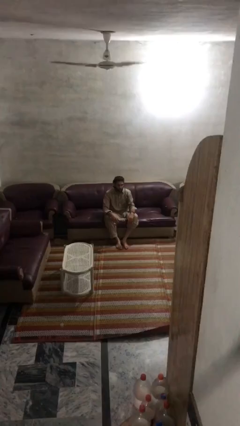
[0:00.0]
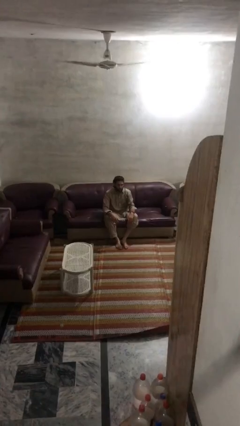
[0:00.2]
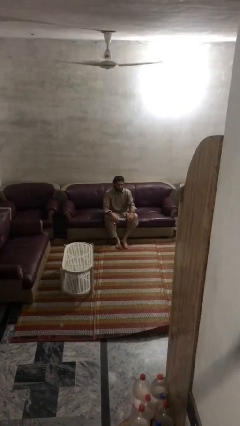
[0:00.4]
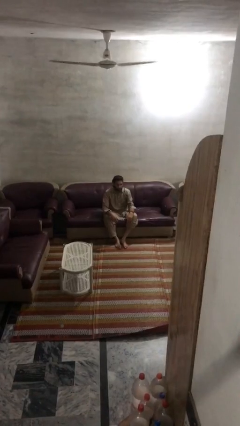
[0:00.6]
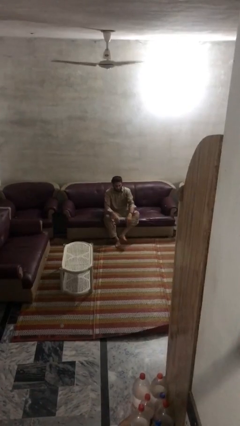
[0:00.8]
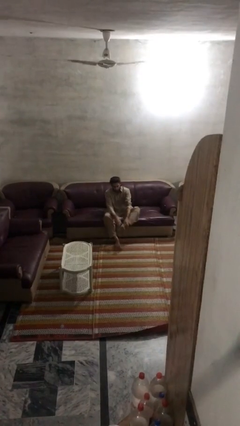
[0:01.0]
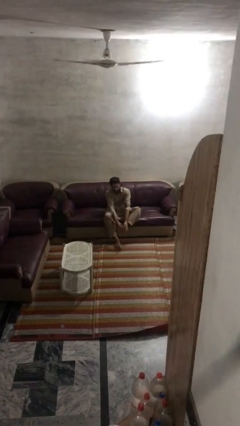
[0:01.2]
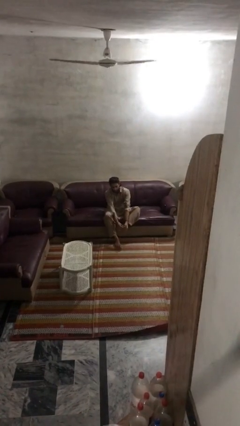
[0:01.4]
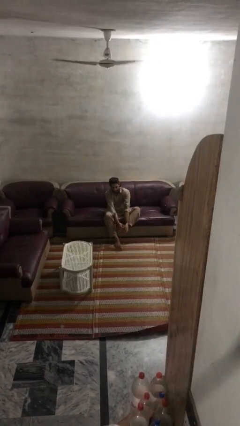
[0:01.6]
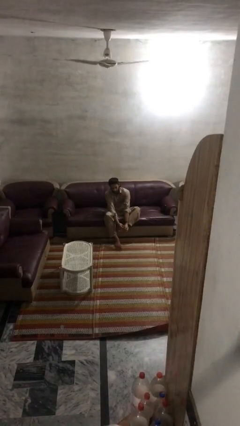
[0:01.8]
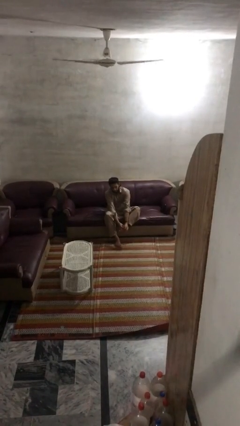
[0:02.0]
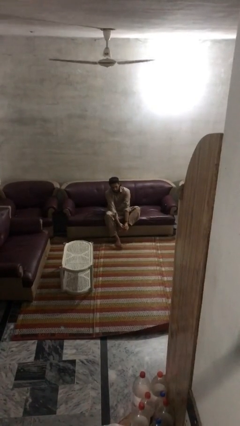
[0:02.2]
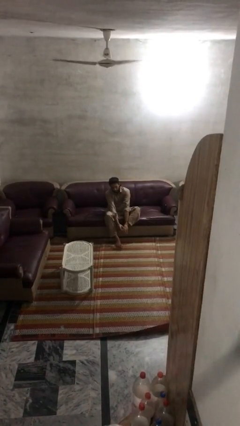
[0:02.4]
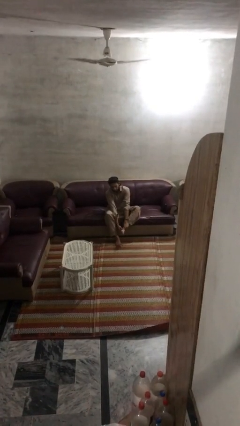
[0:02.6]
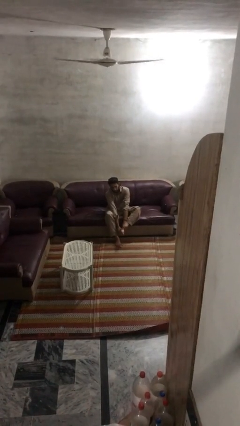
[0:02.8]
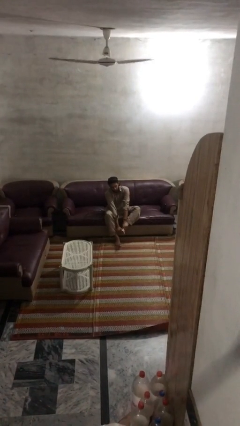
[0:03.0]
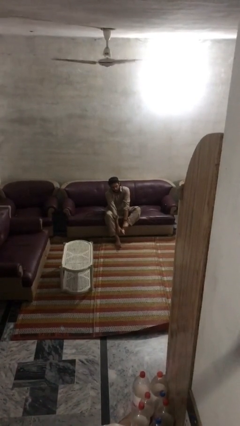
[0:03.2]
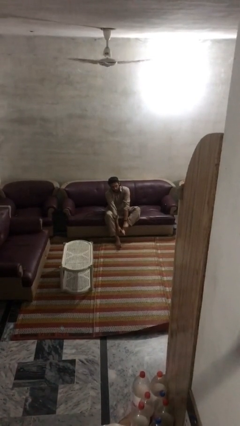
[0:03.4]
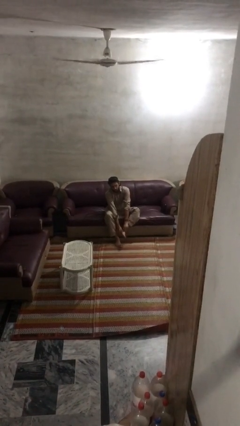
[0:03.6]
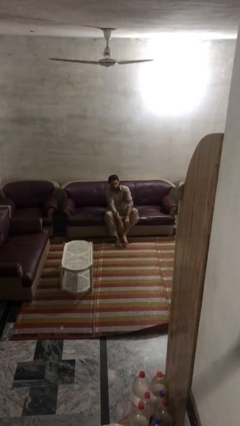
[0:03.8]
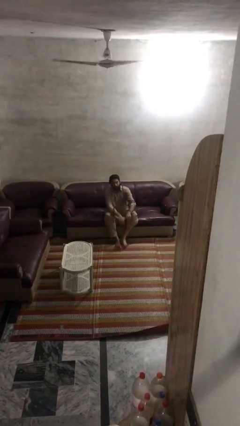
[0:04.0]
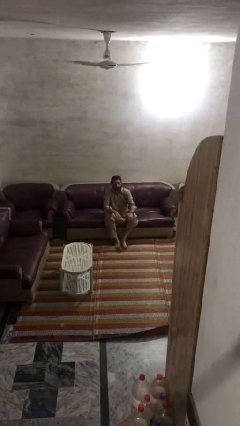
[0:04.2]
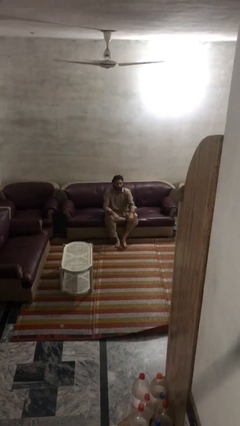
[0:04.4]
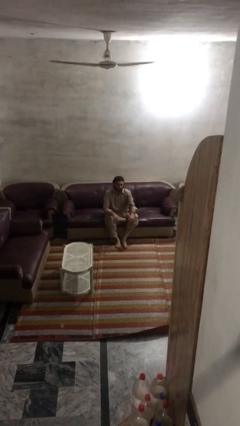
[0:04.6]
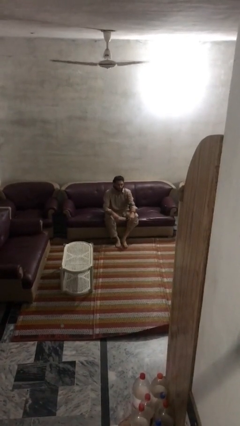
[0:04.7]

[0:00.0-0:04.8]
person rubs foot

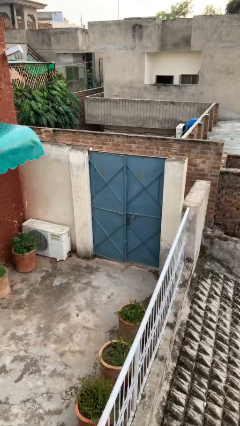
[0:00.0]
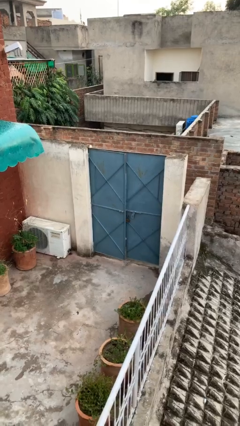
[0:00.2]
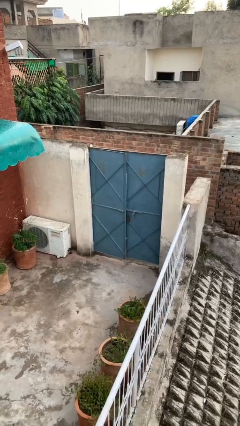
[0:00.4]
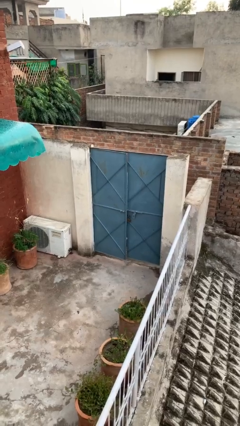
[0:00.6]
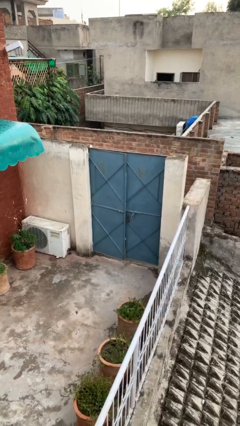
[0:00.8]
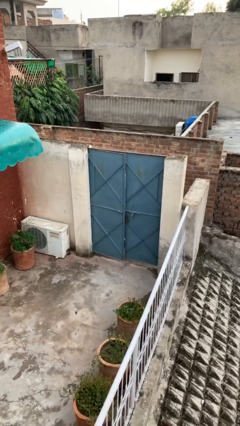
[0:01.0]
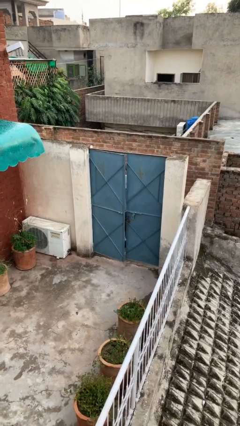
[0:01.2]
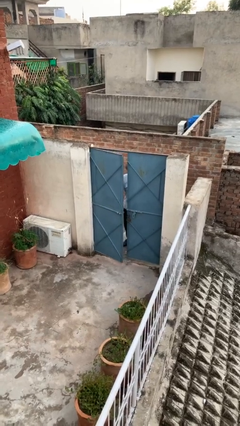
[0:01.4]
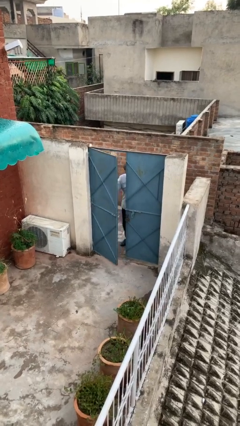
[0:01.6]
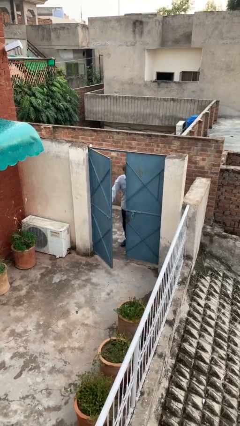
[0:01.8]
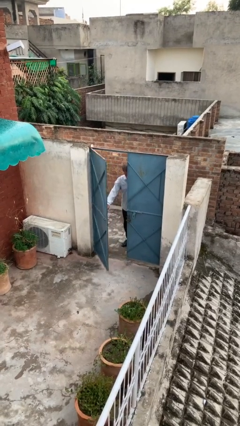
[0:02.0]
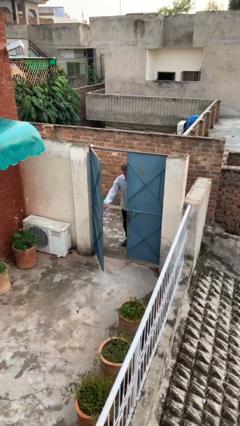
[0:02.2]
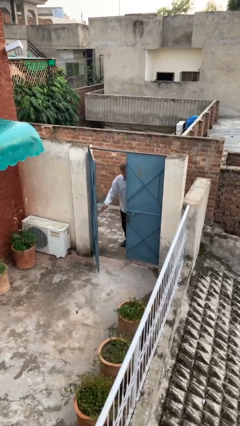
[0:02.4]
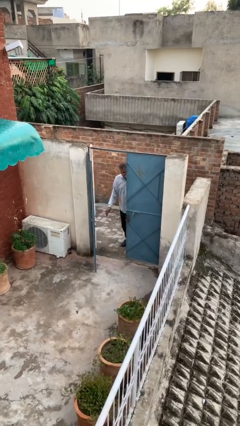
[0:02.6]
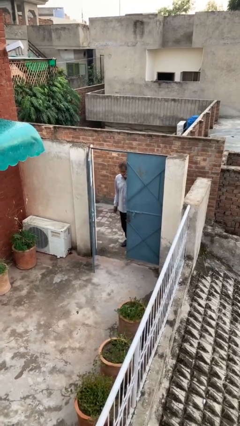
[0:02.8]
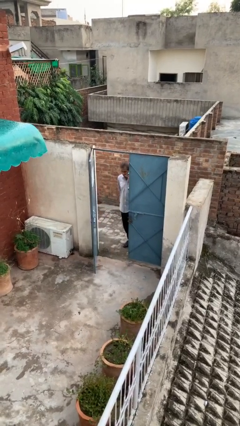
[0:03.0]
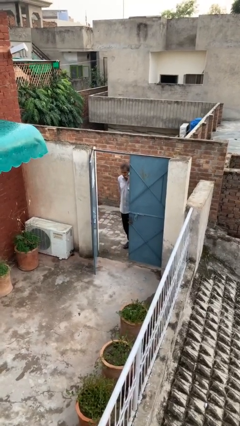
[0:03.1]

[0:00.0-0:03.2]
person opens facility door

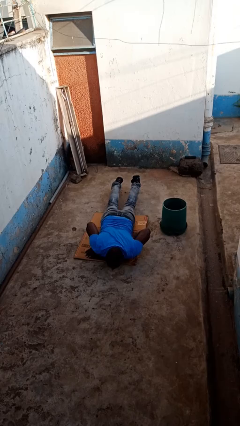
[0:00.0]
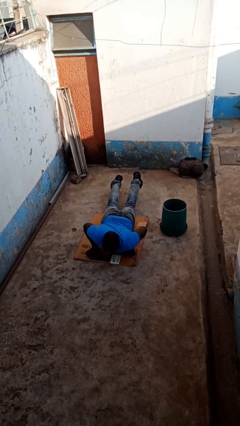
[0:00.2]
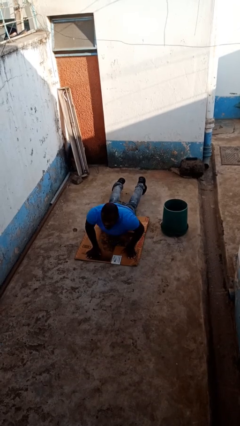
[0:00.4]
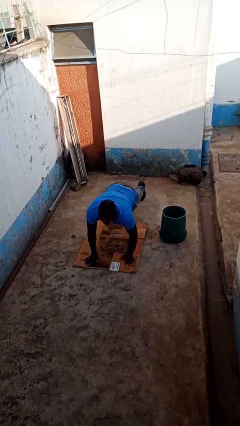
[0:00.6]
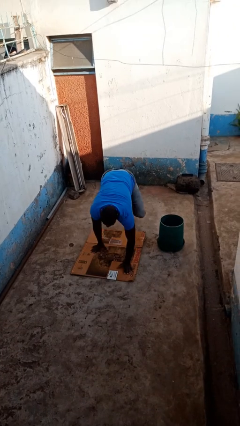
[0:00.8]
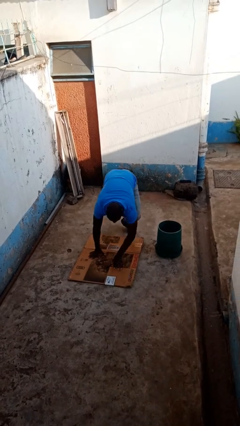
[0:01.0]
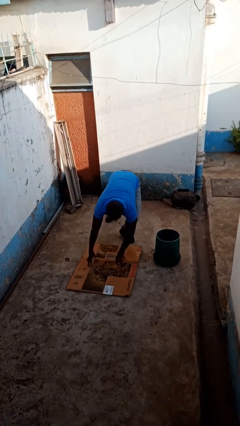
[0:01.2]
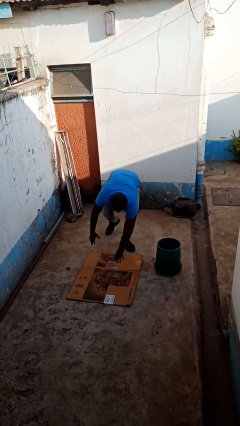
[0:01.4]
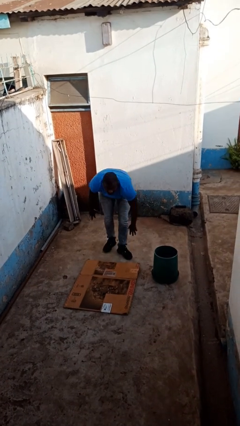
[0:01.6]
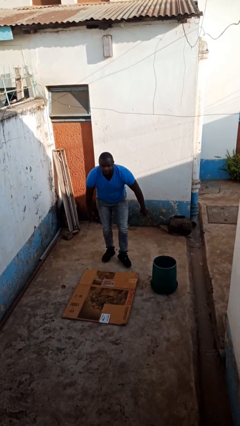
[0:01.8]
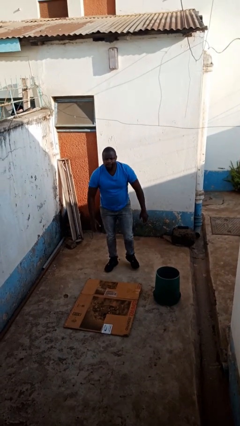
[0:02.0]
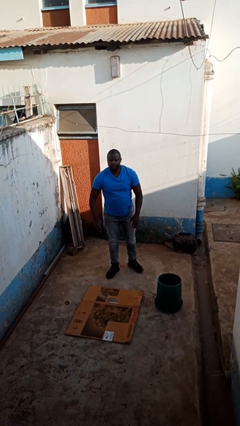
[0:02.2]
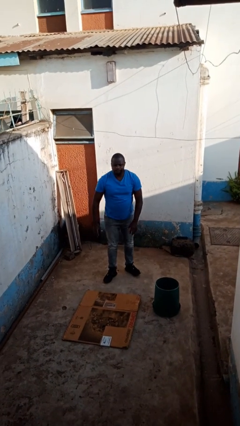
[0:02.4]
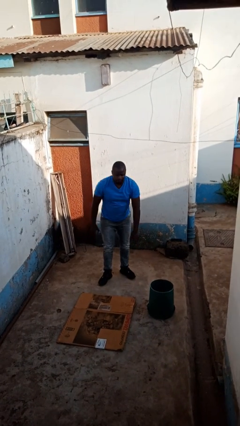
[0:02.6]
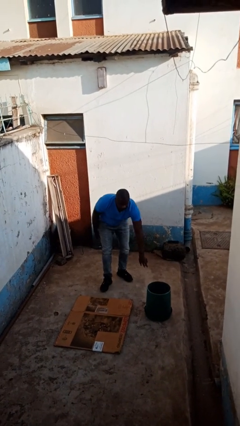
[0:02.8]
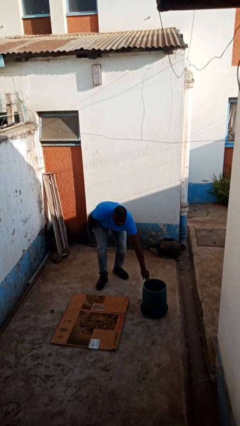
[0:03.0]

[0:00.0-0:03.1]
person stands up from floor

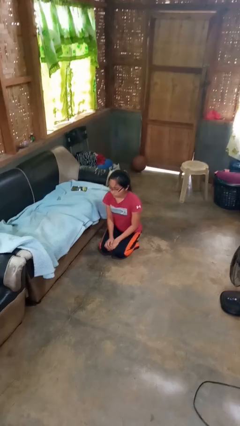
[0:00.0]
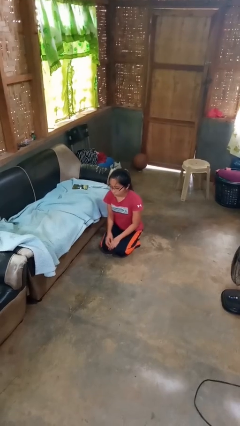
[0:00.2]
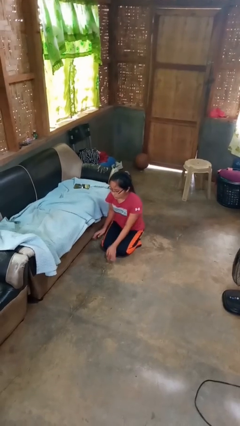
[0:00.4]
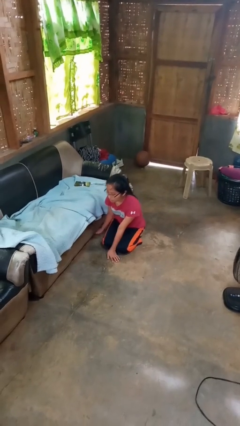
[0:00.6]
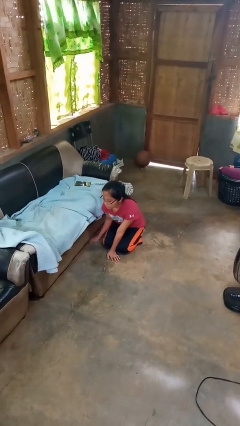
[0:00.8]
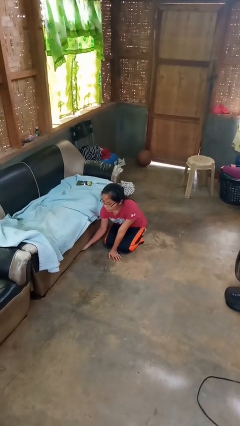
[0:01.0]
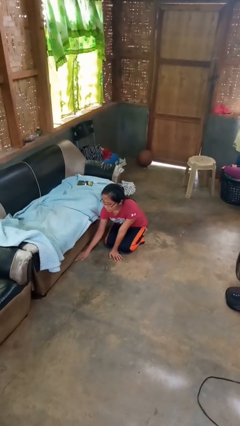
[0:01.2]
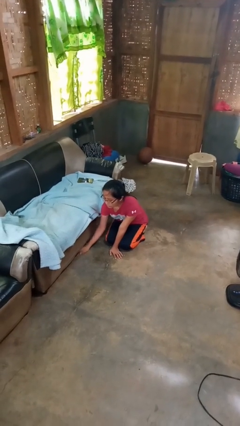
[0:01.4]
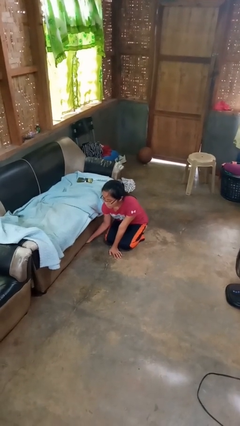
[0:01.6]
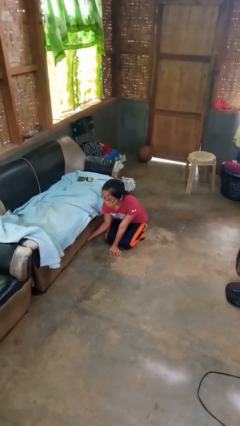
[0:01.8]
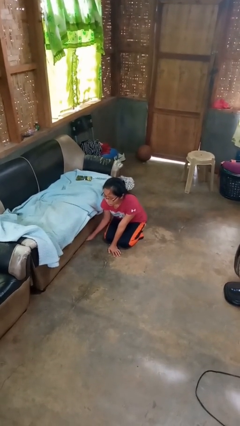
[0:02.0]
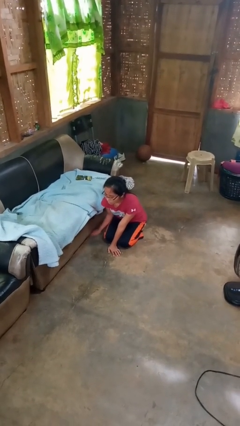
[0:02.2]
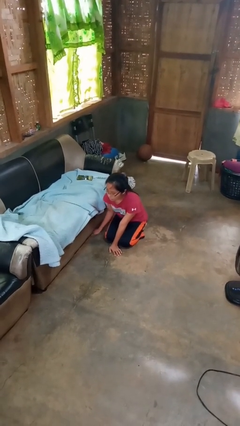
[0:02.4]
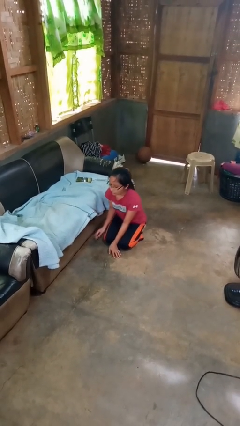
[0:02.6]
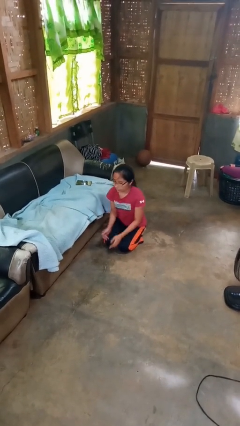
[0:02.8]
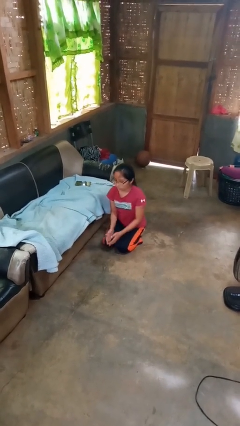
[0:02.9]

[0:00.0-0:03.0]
person searches under couch

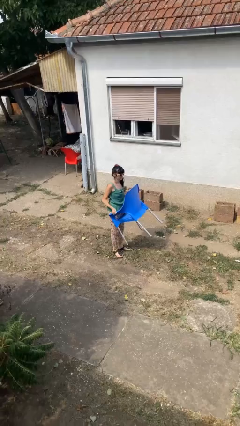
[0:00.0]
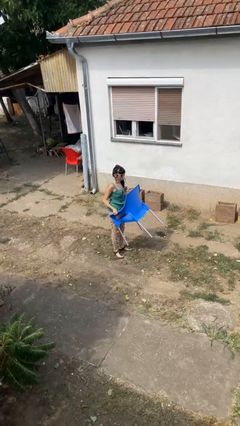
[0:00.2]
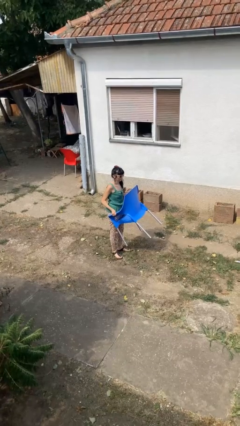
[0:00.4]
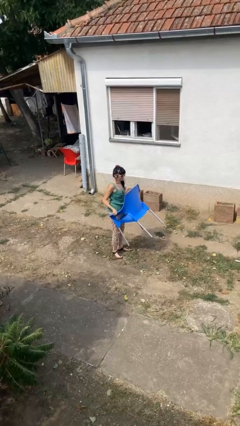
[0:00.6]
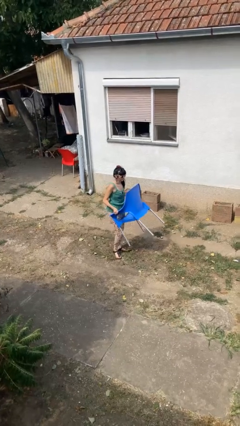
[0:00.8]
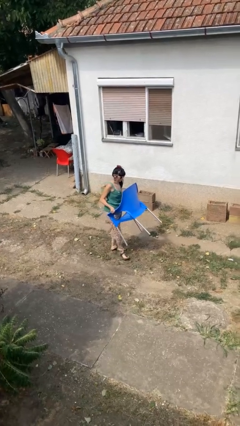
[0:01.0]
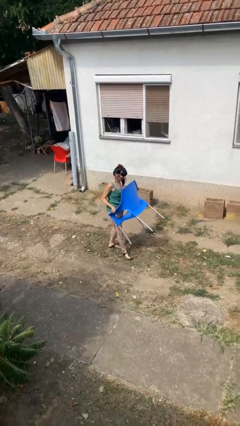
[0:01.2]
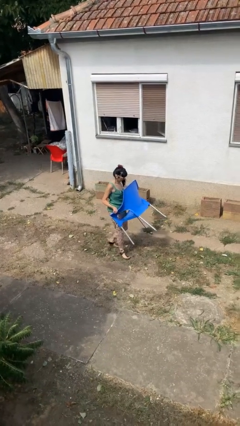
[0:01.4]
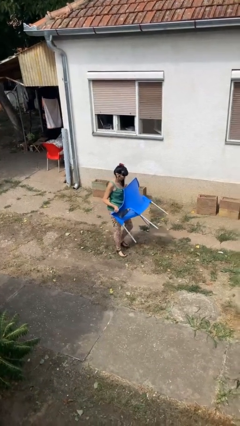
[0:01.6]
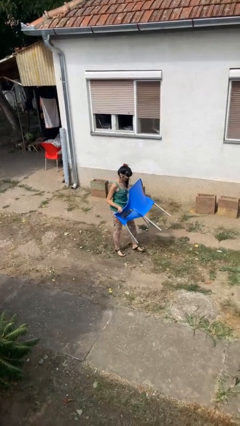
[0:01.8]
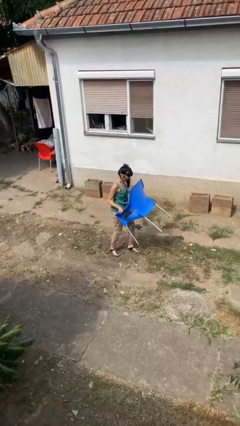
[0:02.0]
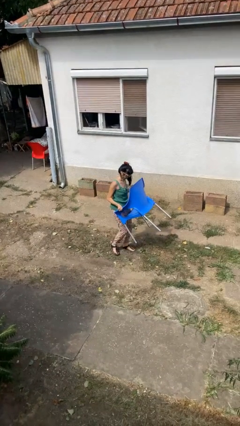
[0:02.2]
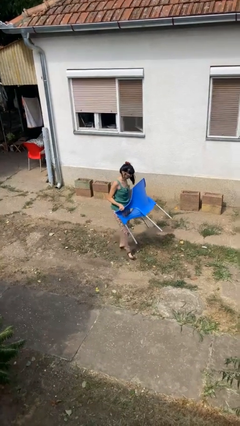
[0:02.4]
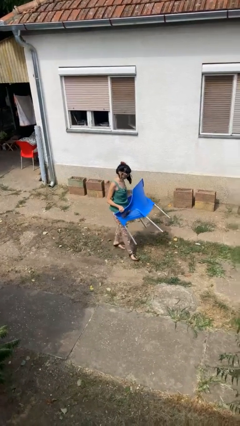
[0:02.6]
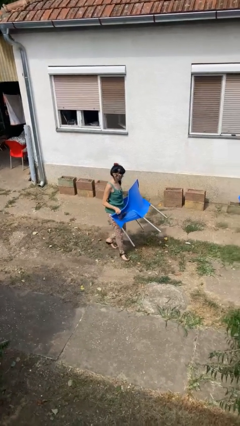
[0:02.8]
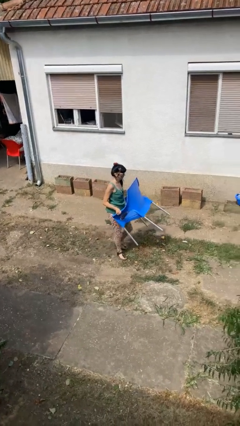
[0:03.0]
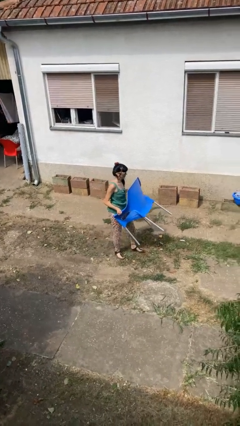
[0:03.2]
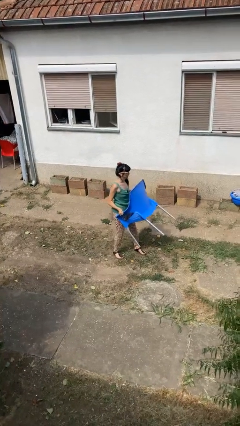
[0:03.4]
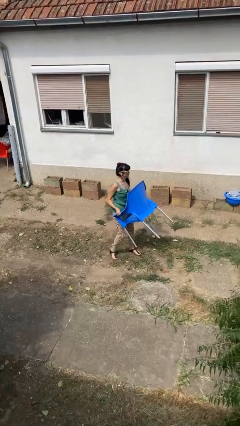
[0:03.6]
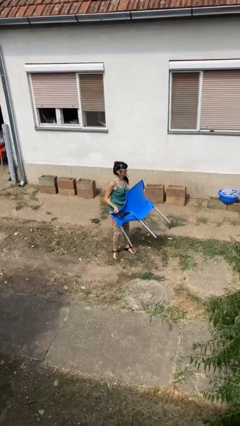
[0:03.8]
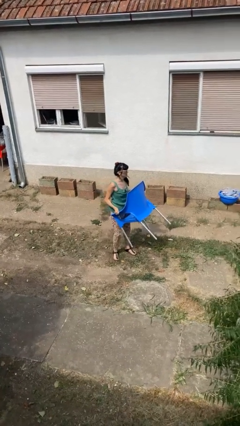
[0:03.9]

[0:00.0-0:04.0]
person carries furniture
